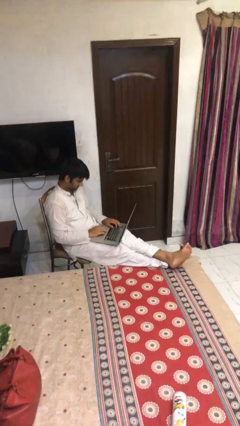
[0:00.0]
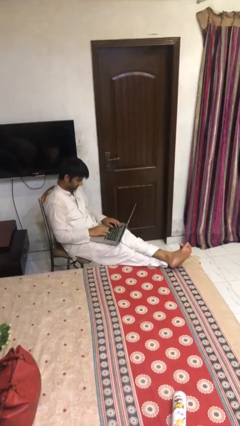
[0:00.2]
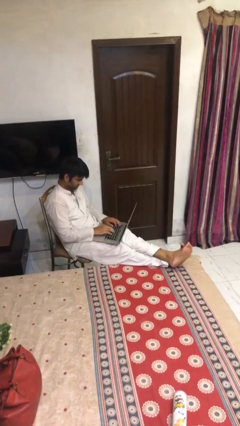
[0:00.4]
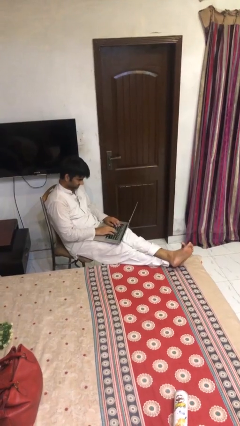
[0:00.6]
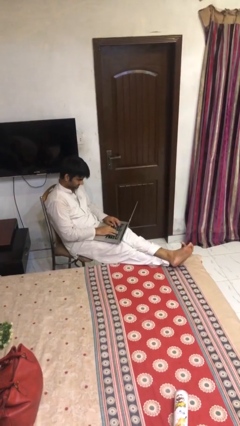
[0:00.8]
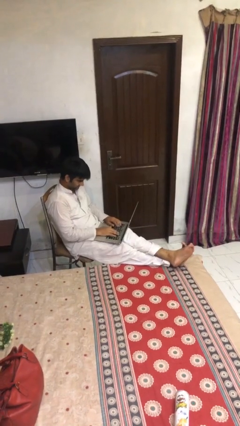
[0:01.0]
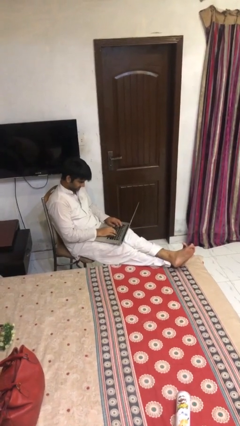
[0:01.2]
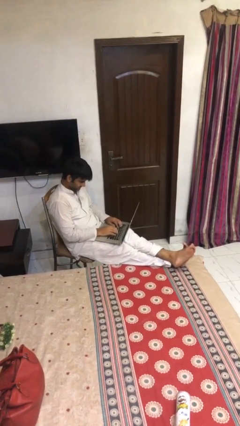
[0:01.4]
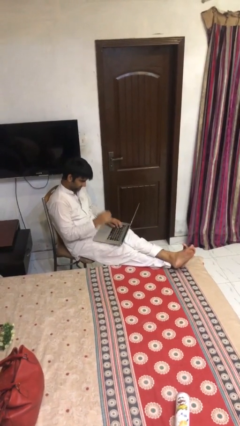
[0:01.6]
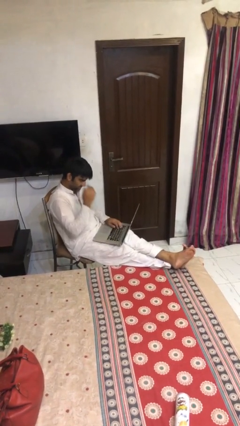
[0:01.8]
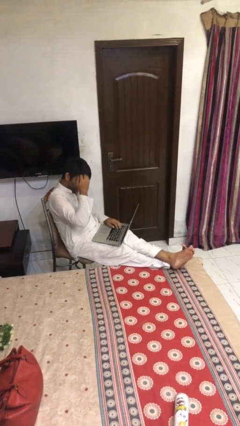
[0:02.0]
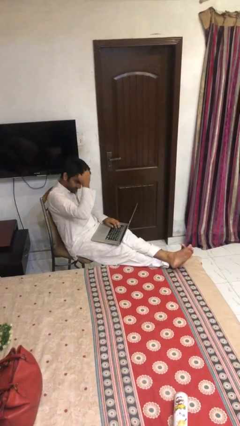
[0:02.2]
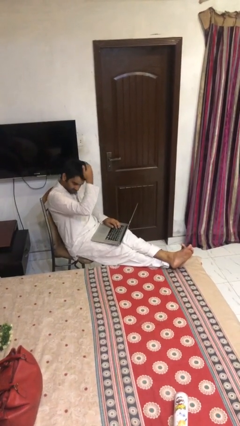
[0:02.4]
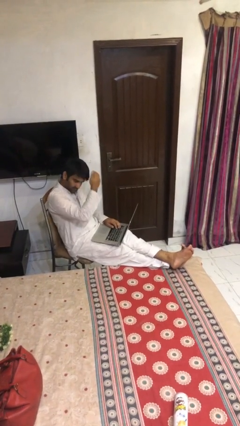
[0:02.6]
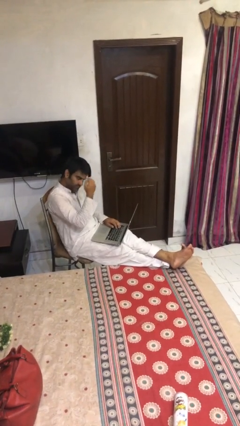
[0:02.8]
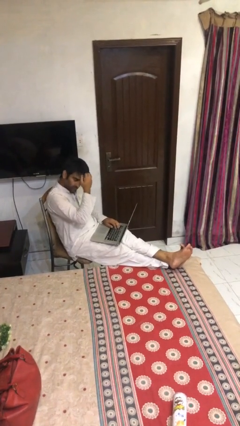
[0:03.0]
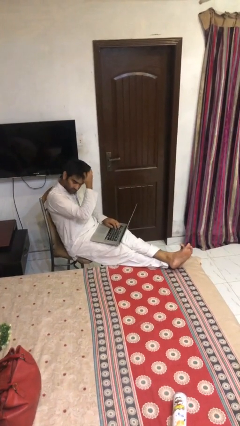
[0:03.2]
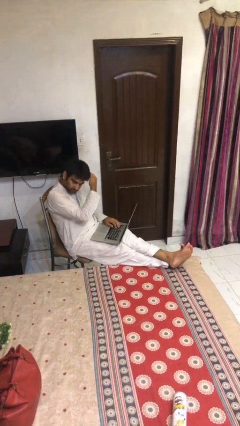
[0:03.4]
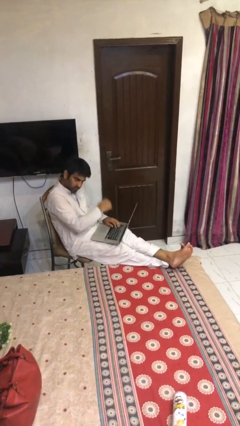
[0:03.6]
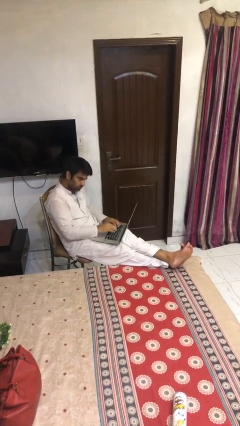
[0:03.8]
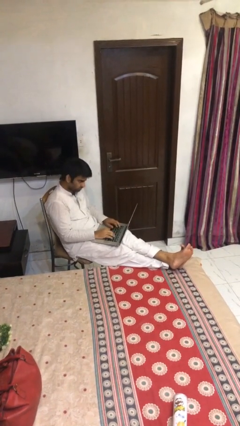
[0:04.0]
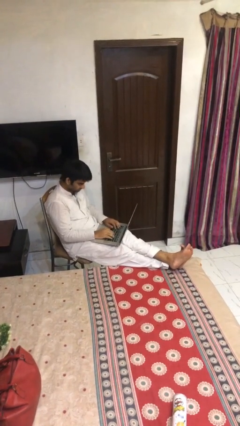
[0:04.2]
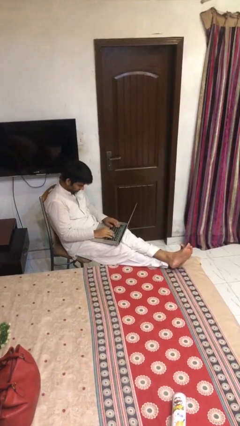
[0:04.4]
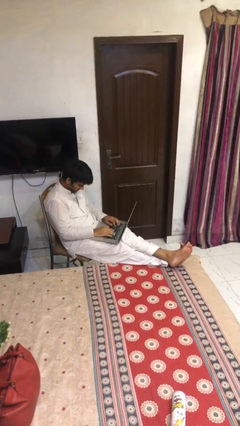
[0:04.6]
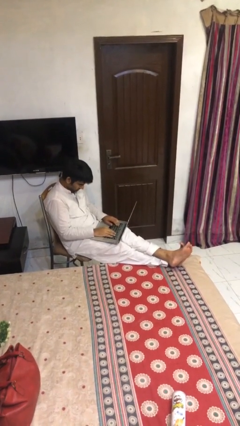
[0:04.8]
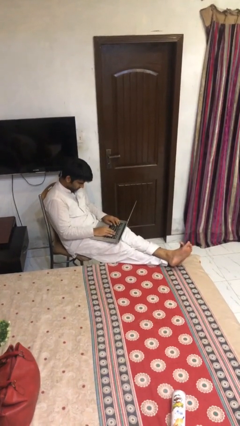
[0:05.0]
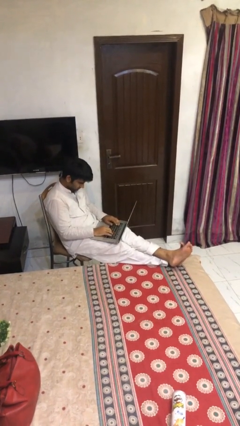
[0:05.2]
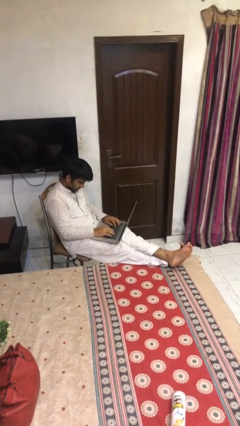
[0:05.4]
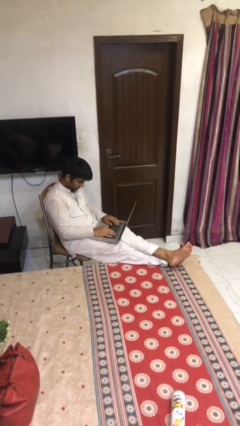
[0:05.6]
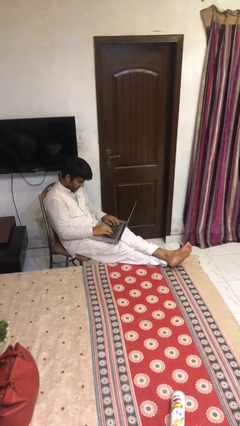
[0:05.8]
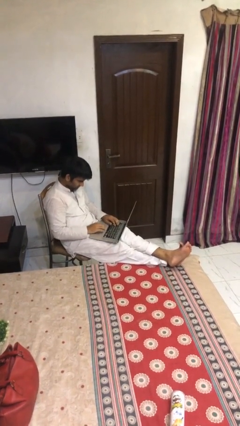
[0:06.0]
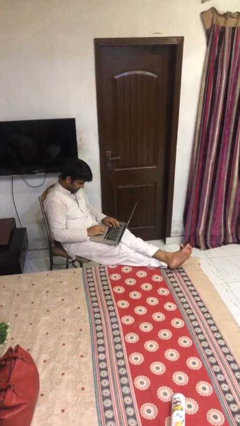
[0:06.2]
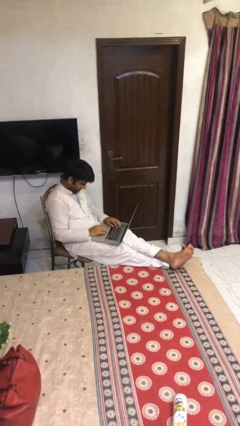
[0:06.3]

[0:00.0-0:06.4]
person interacts with laptop

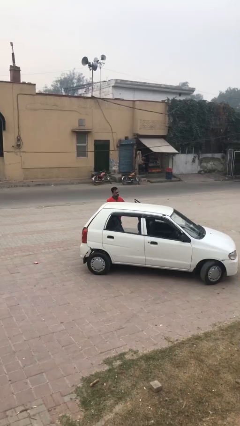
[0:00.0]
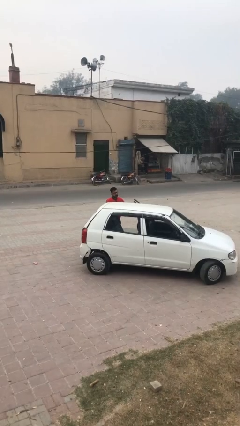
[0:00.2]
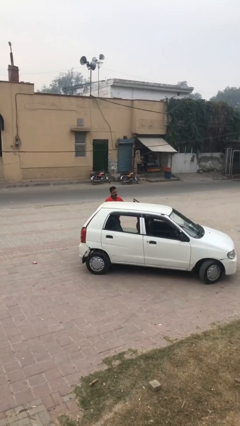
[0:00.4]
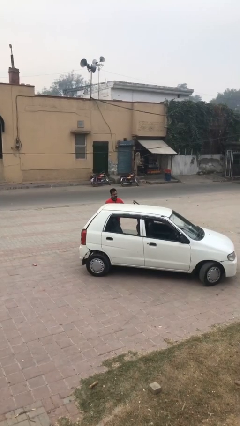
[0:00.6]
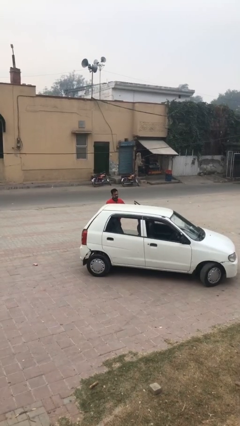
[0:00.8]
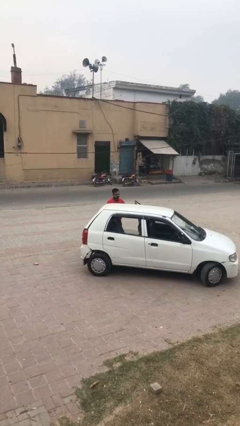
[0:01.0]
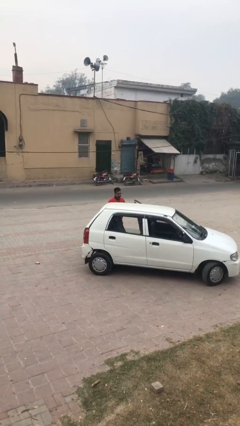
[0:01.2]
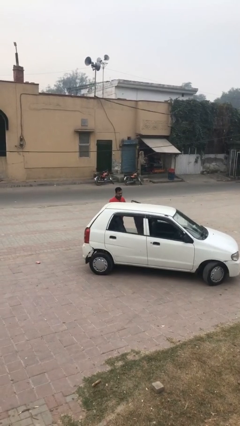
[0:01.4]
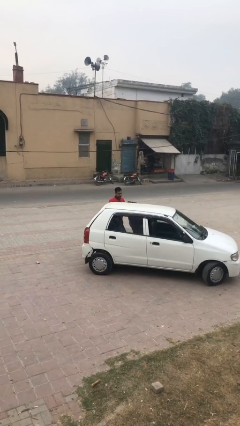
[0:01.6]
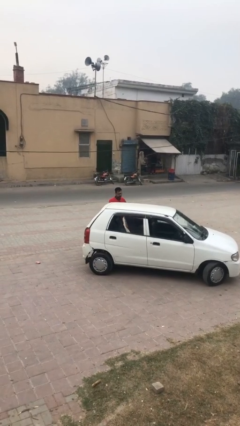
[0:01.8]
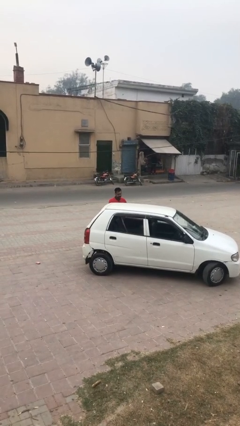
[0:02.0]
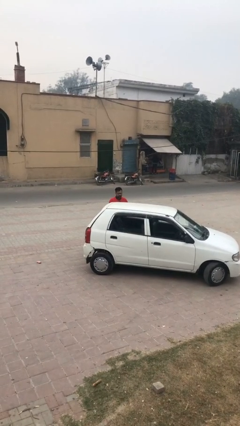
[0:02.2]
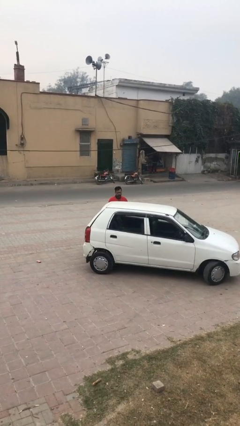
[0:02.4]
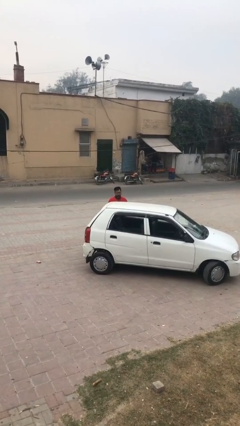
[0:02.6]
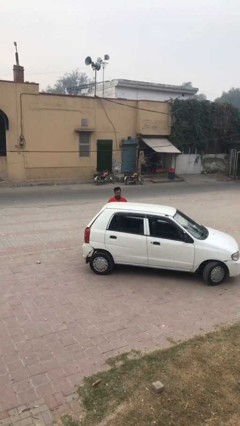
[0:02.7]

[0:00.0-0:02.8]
person closes car door

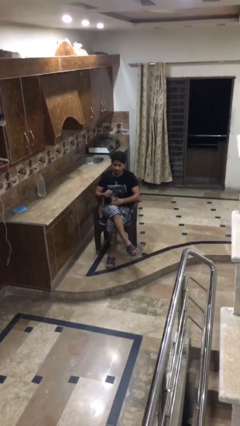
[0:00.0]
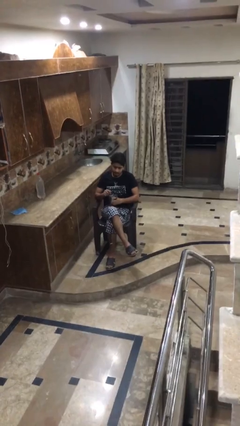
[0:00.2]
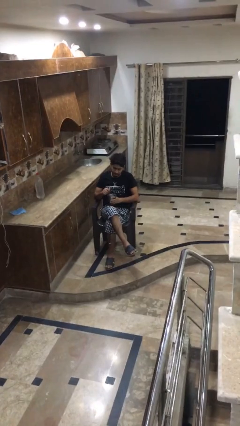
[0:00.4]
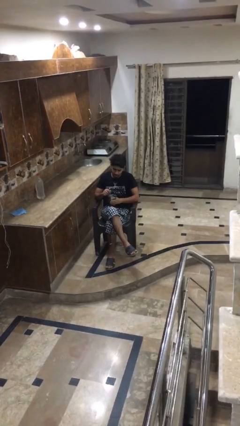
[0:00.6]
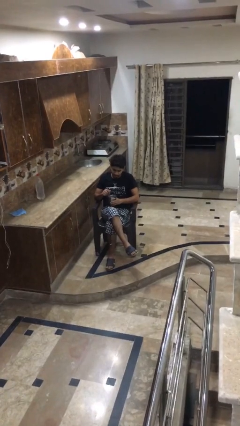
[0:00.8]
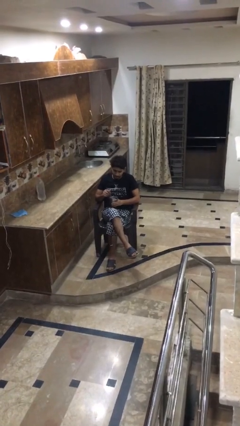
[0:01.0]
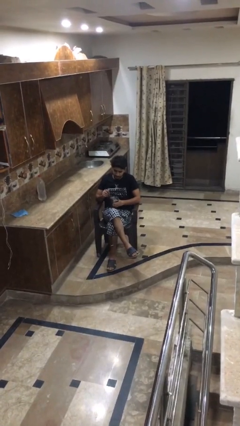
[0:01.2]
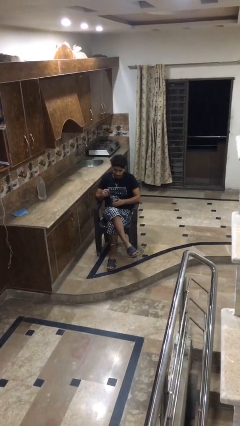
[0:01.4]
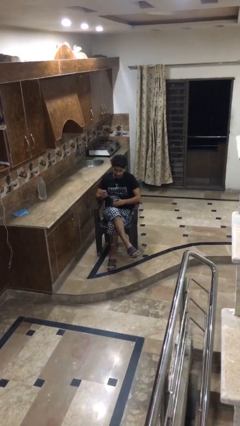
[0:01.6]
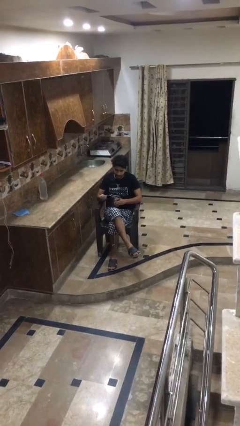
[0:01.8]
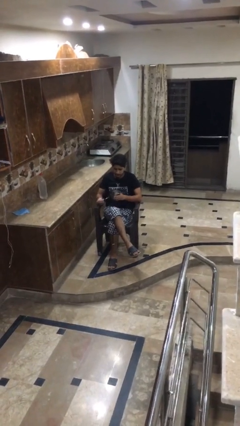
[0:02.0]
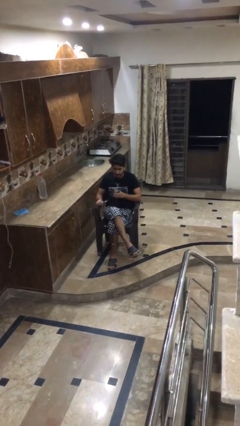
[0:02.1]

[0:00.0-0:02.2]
person stirs mug

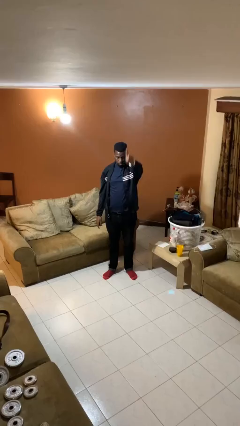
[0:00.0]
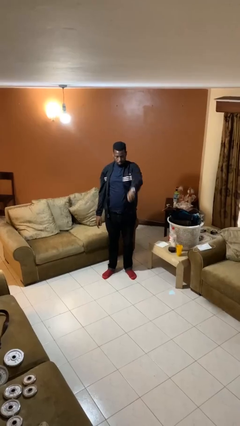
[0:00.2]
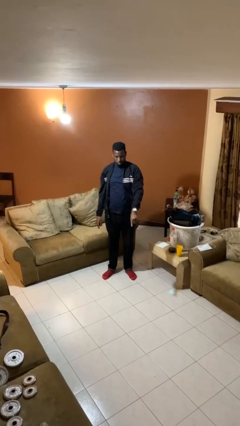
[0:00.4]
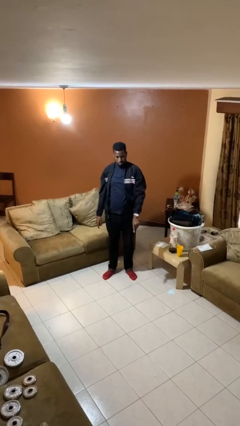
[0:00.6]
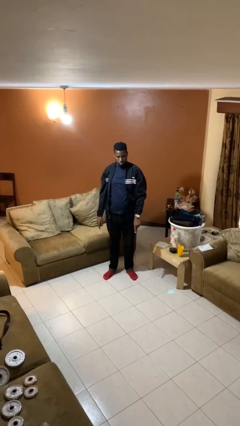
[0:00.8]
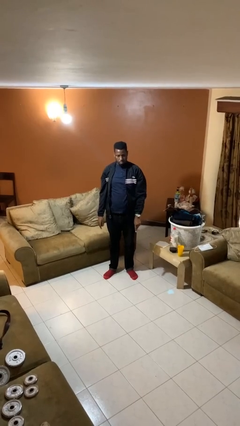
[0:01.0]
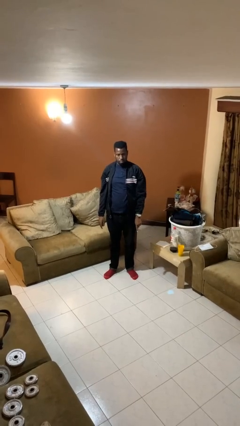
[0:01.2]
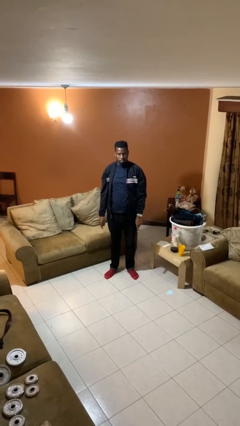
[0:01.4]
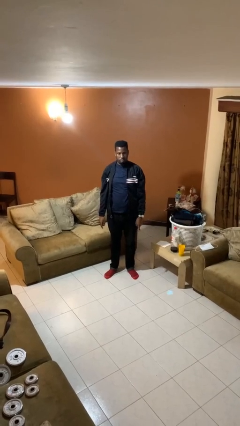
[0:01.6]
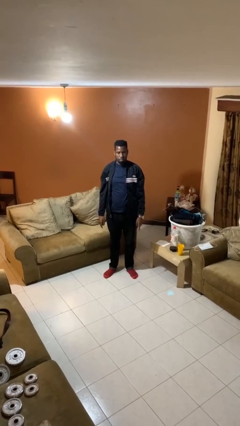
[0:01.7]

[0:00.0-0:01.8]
person gestures swipe down

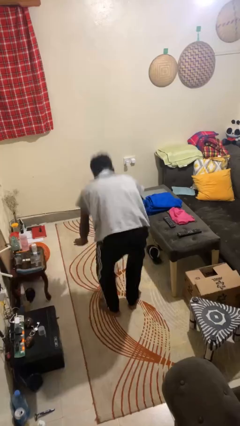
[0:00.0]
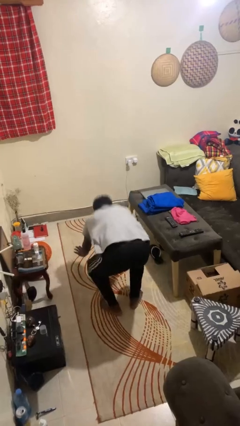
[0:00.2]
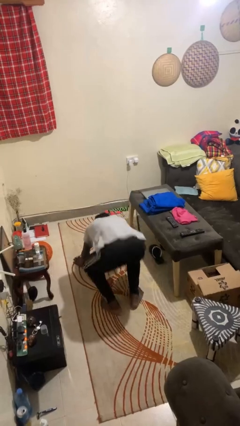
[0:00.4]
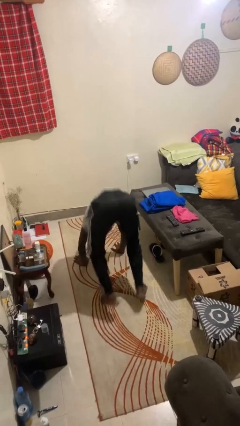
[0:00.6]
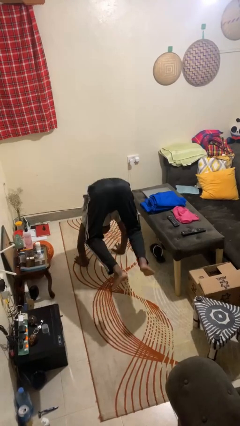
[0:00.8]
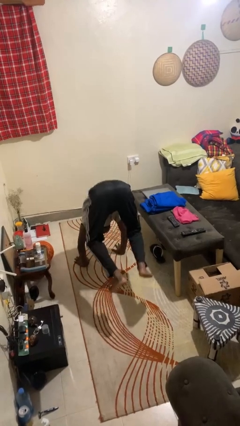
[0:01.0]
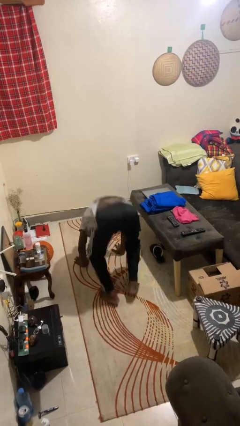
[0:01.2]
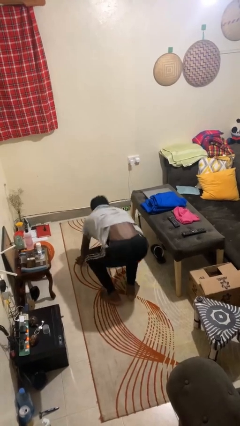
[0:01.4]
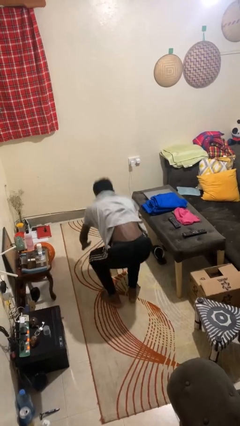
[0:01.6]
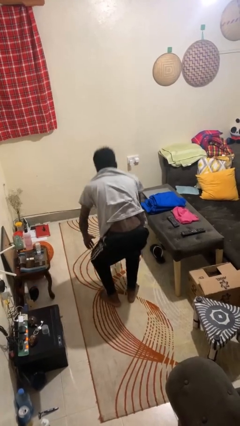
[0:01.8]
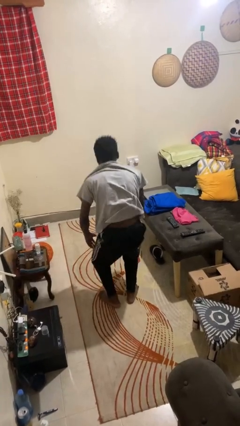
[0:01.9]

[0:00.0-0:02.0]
person handstand

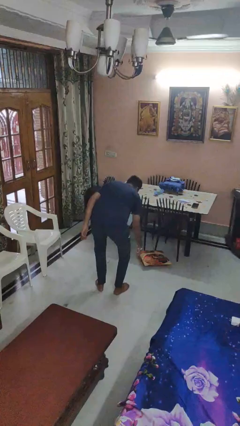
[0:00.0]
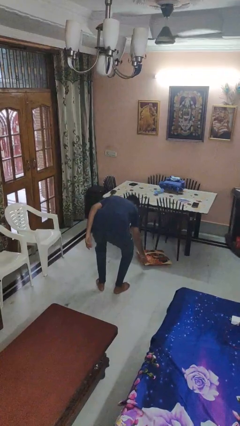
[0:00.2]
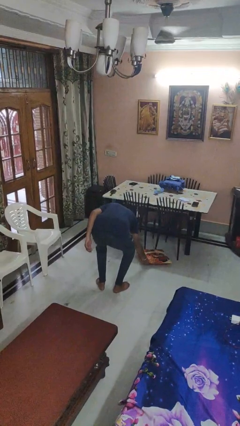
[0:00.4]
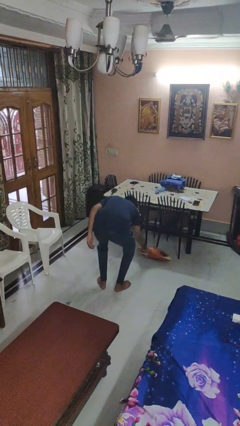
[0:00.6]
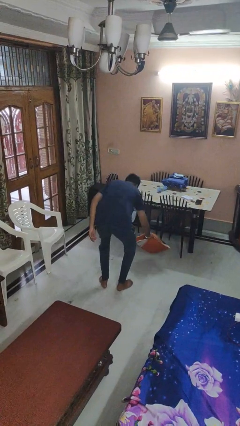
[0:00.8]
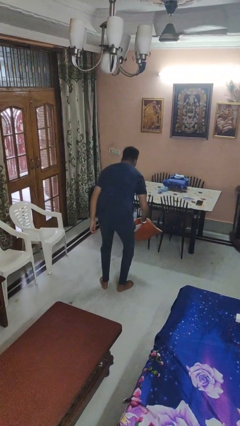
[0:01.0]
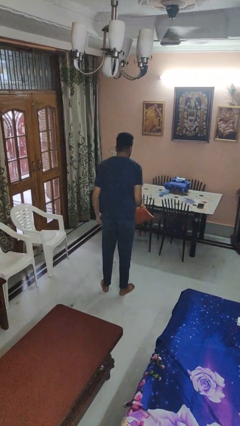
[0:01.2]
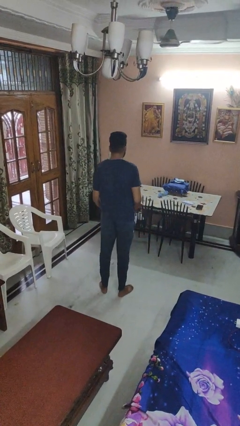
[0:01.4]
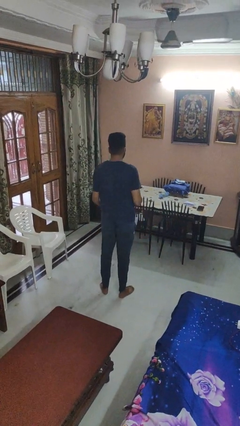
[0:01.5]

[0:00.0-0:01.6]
person picks up object from floor

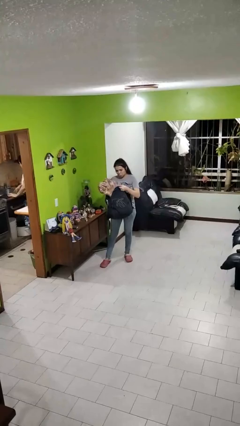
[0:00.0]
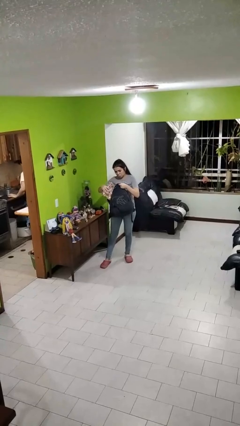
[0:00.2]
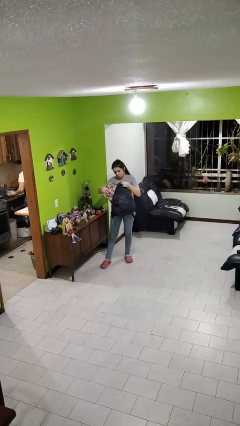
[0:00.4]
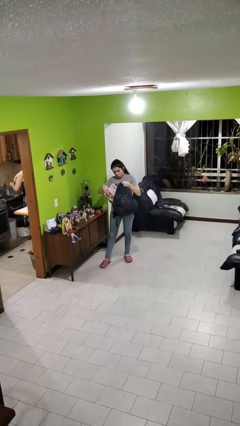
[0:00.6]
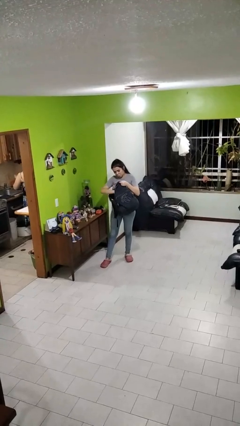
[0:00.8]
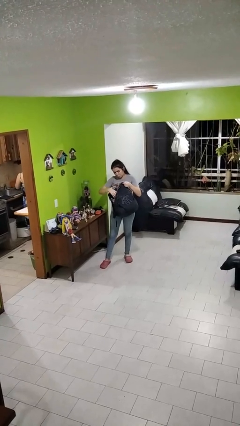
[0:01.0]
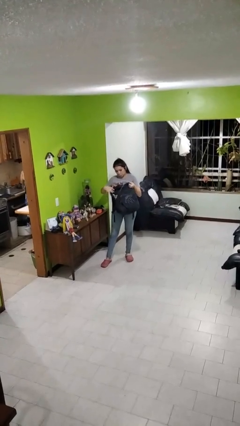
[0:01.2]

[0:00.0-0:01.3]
person puts object into backpack
